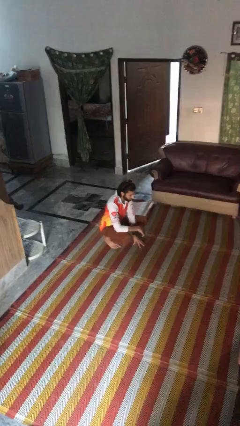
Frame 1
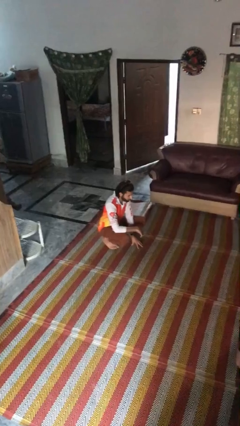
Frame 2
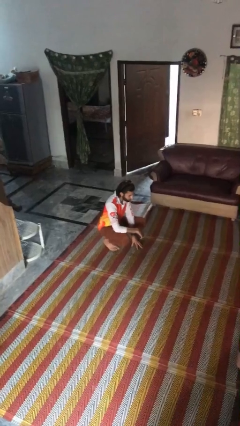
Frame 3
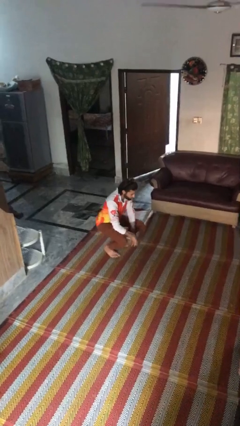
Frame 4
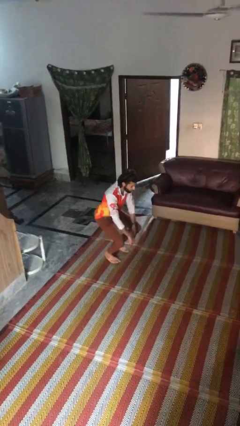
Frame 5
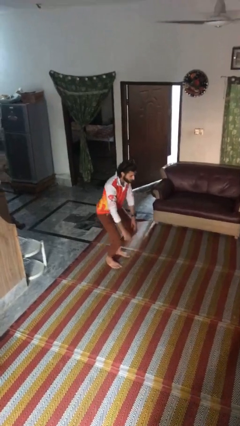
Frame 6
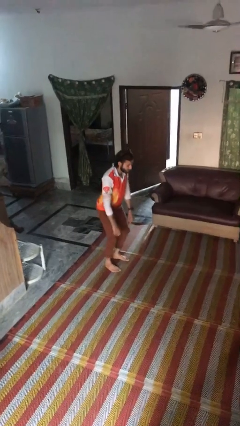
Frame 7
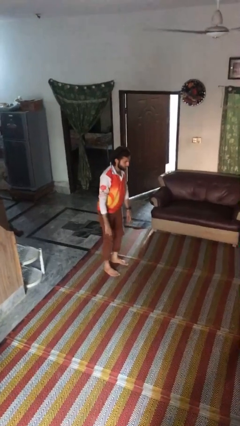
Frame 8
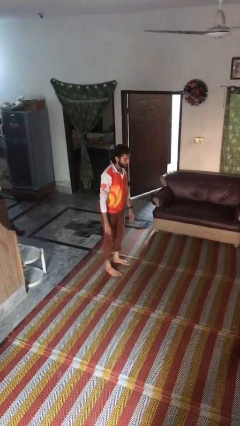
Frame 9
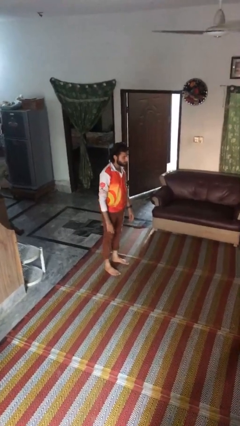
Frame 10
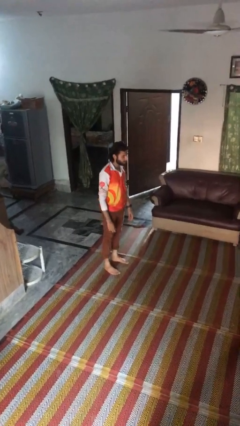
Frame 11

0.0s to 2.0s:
person stands up

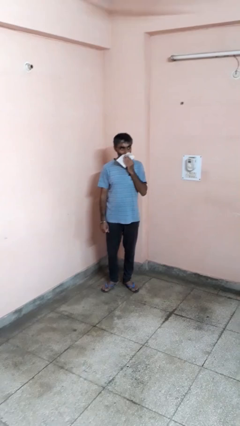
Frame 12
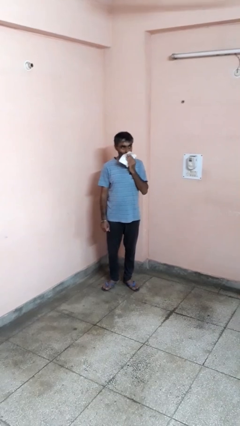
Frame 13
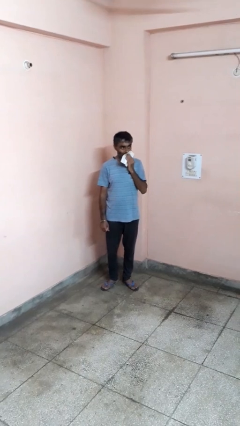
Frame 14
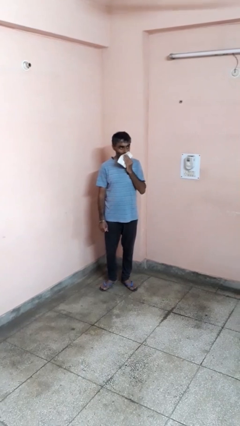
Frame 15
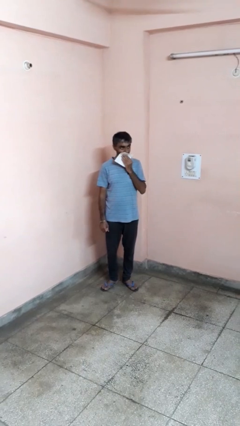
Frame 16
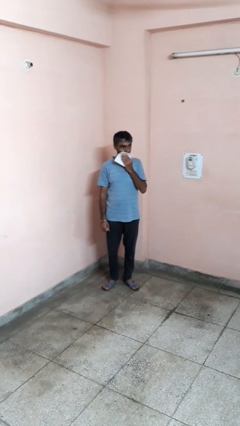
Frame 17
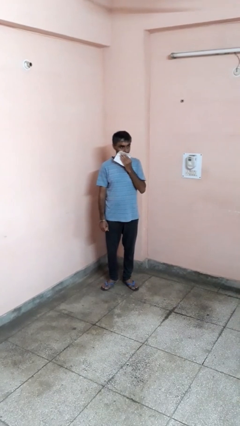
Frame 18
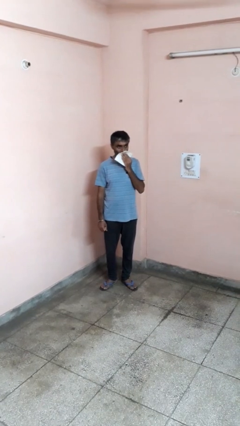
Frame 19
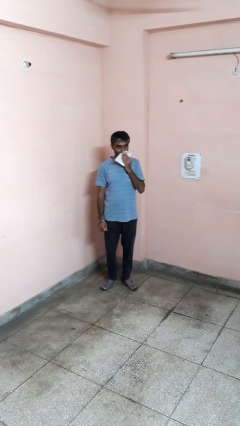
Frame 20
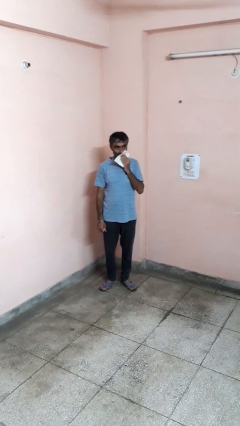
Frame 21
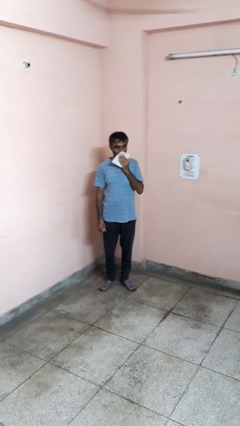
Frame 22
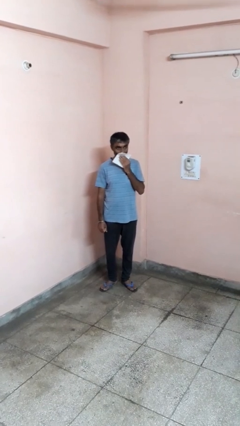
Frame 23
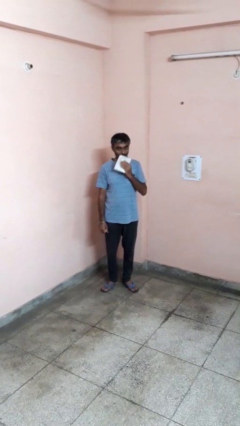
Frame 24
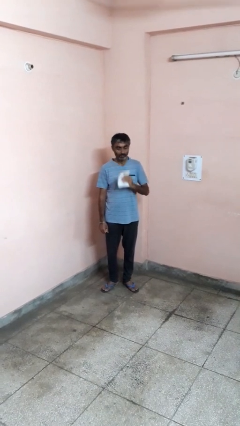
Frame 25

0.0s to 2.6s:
person wipes mouth with napkin

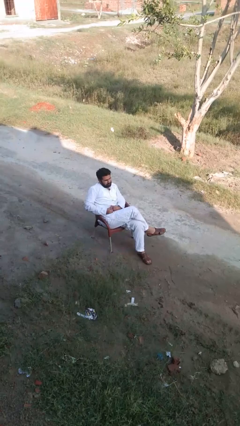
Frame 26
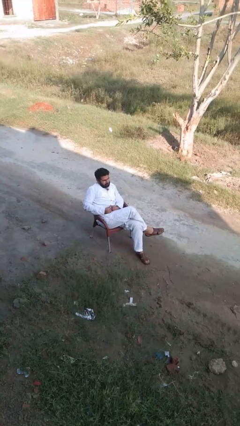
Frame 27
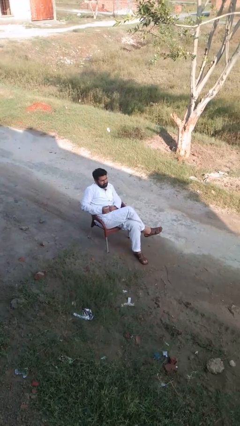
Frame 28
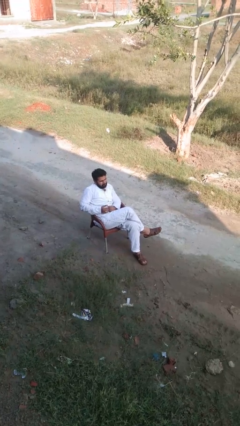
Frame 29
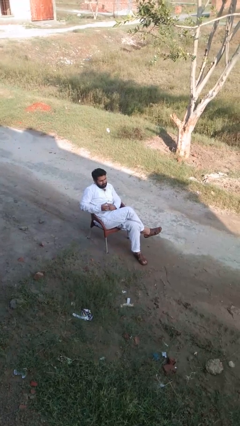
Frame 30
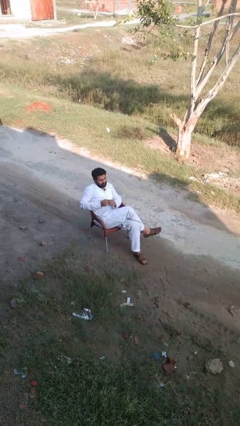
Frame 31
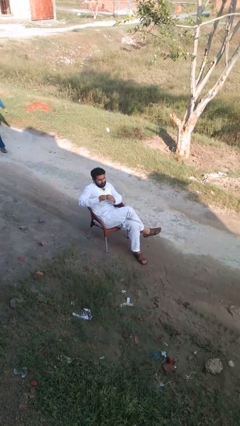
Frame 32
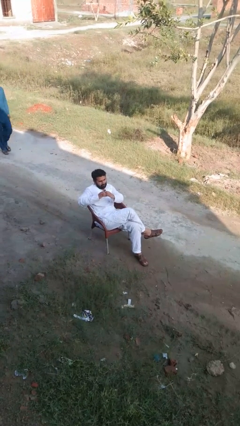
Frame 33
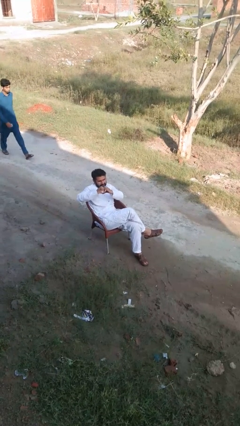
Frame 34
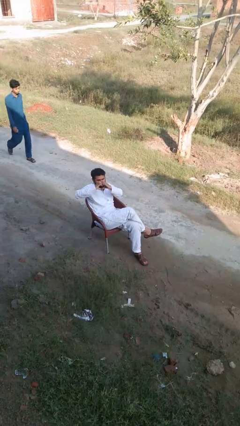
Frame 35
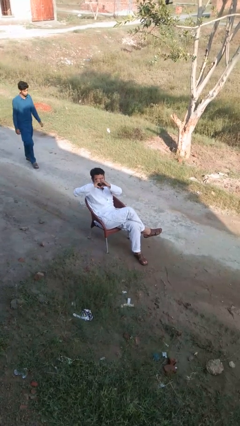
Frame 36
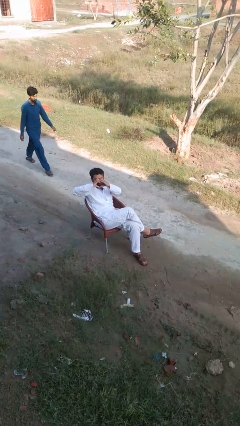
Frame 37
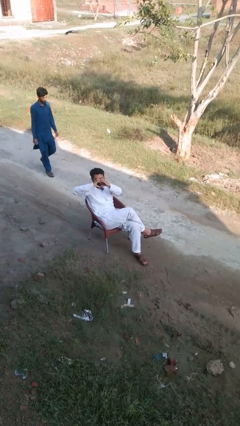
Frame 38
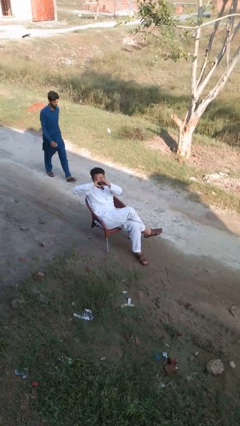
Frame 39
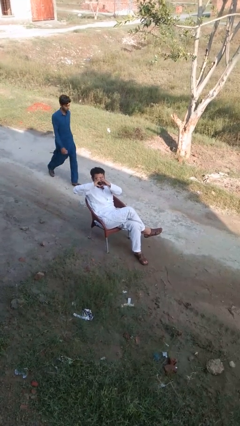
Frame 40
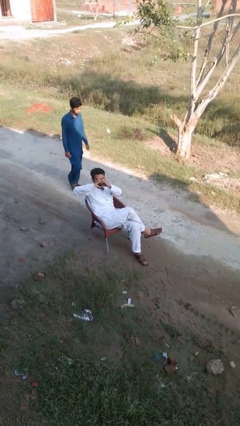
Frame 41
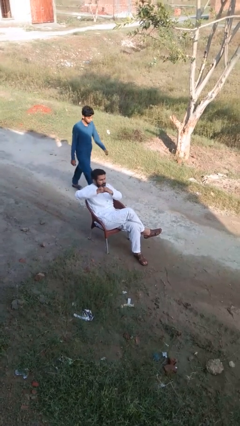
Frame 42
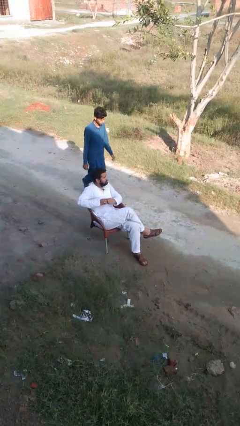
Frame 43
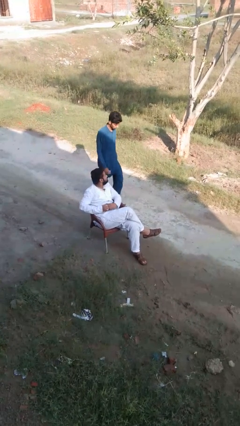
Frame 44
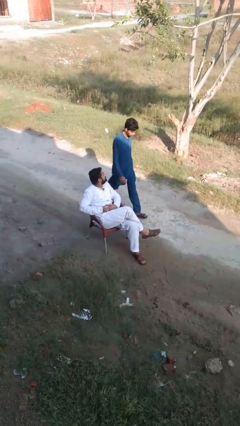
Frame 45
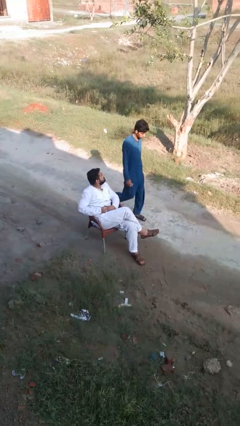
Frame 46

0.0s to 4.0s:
person gestures heart

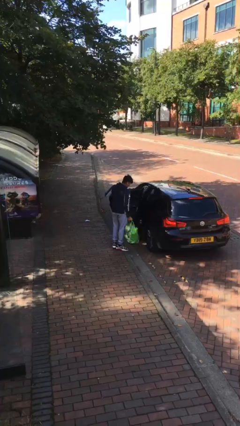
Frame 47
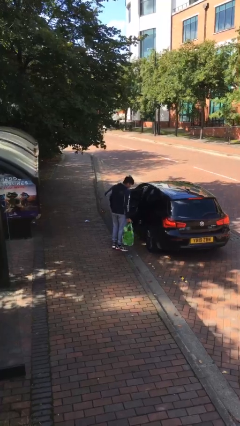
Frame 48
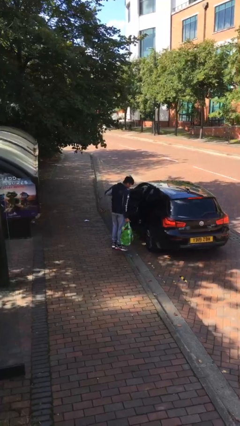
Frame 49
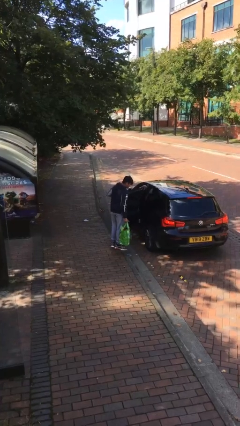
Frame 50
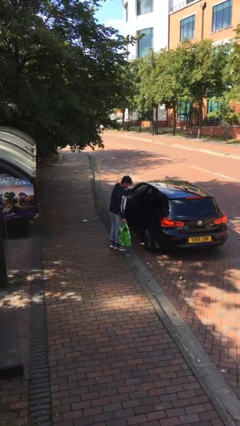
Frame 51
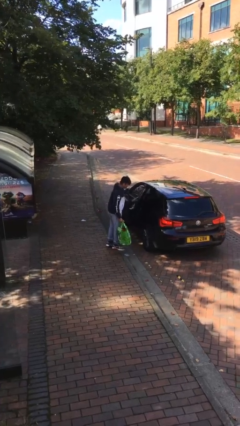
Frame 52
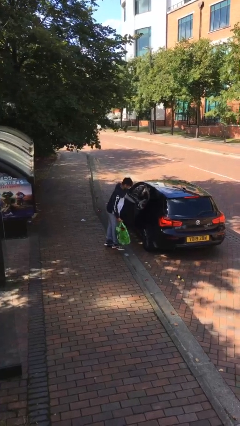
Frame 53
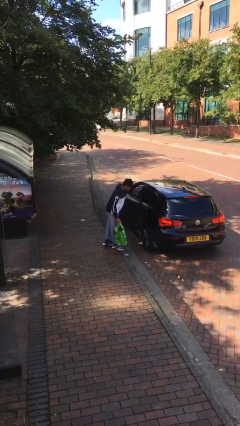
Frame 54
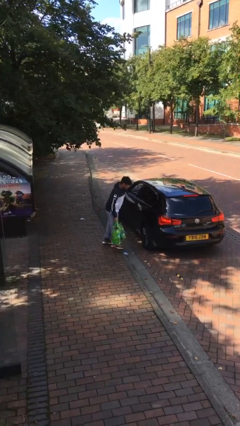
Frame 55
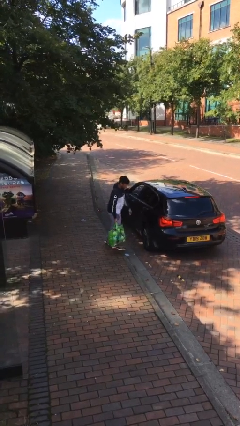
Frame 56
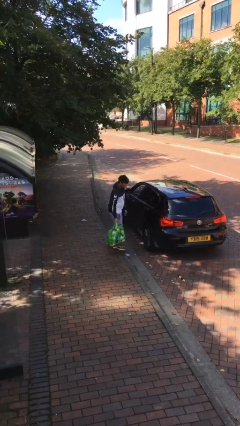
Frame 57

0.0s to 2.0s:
person closes car door

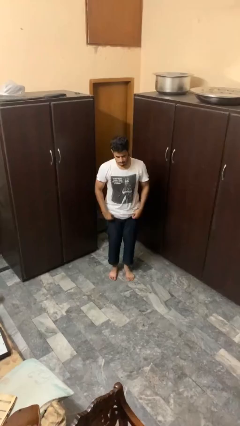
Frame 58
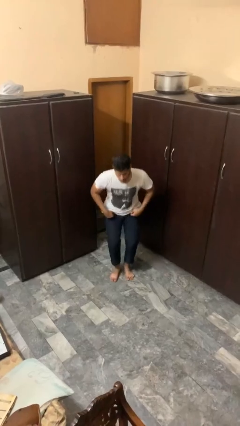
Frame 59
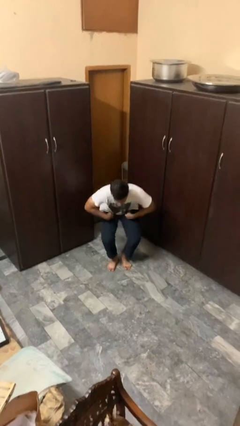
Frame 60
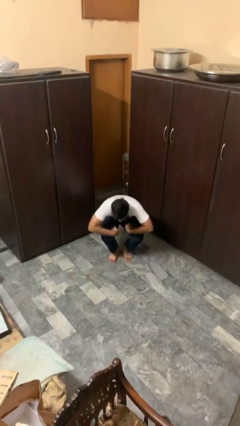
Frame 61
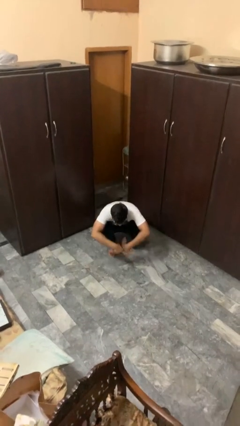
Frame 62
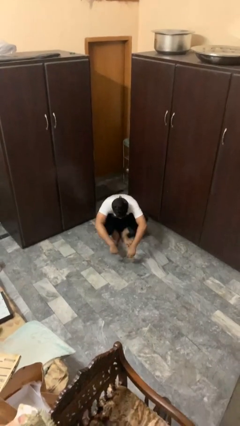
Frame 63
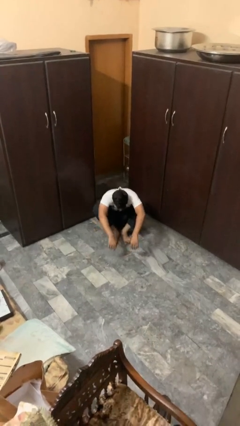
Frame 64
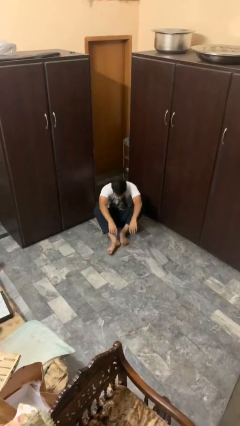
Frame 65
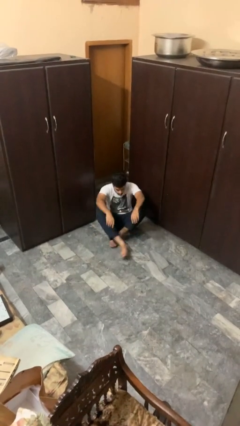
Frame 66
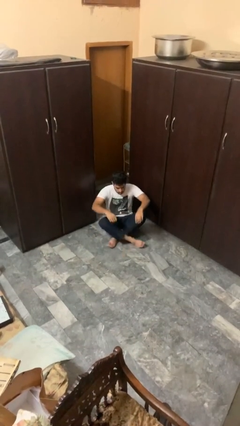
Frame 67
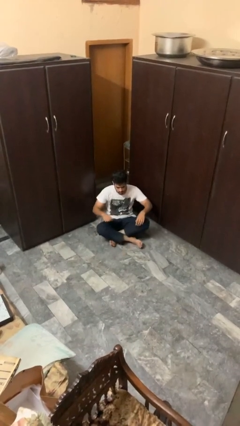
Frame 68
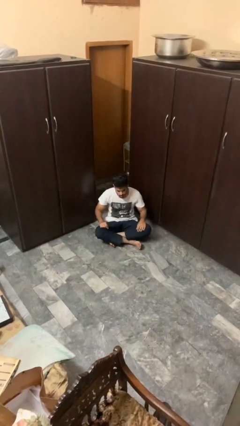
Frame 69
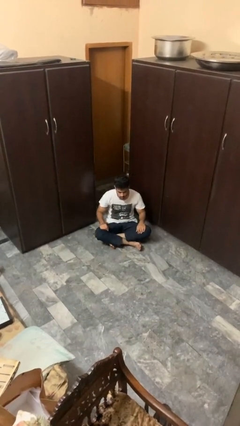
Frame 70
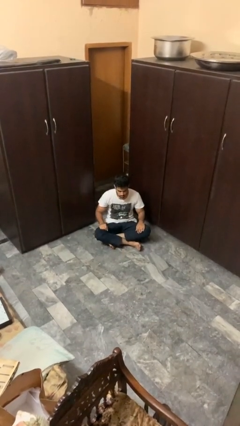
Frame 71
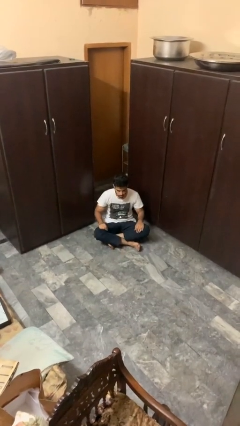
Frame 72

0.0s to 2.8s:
person sits crisscross

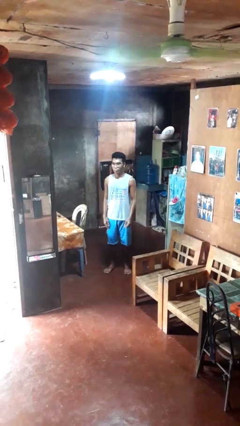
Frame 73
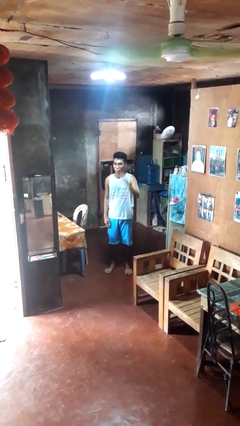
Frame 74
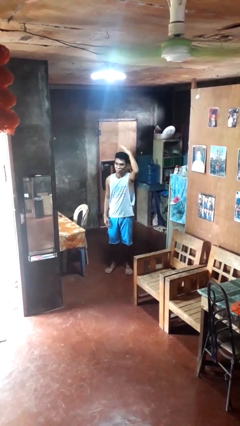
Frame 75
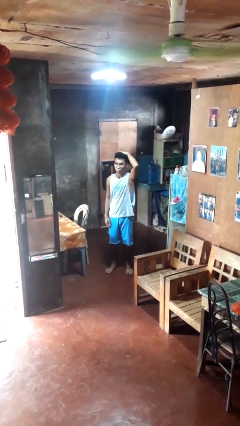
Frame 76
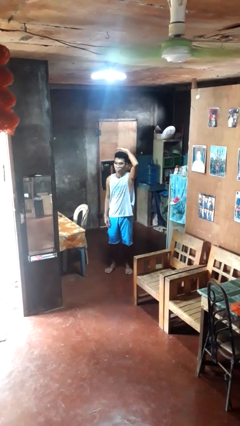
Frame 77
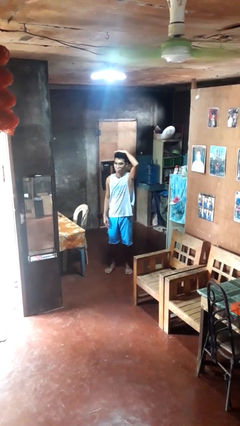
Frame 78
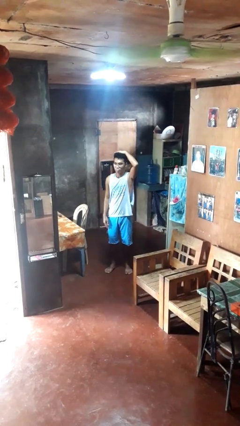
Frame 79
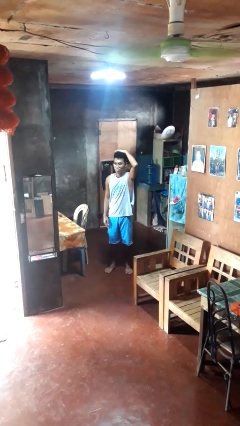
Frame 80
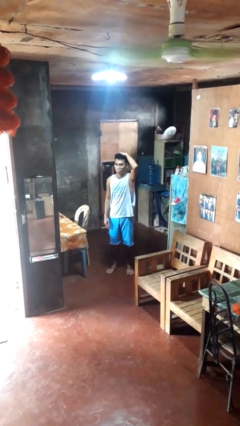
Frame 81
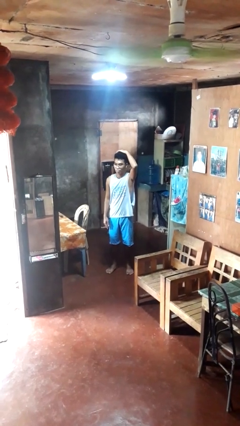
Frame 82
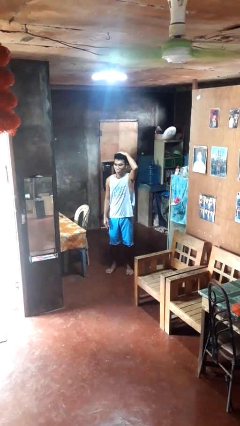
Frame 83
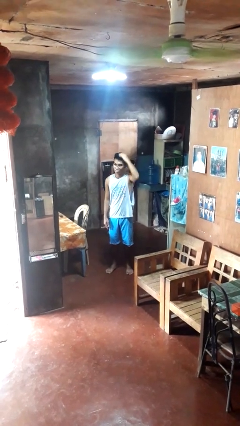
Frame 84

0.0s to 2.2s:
person pats head

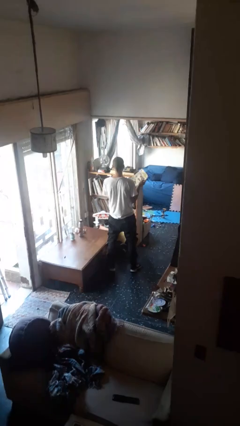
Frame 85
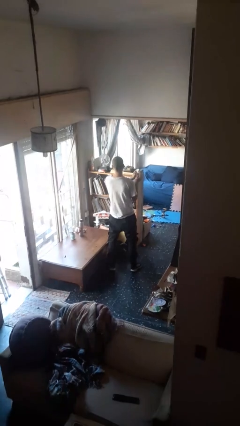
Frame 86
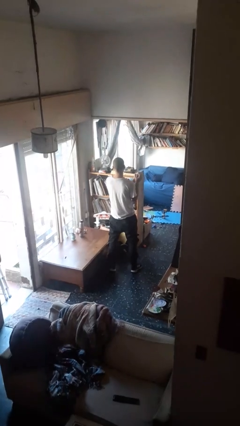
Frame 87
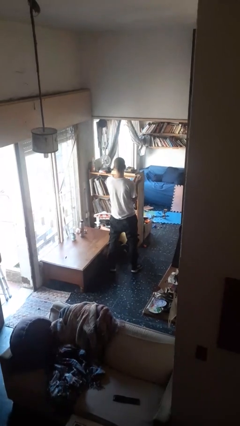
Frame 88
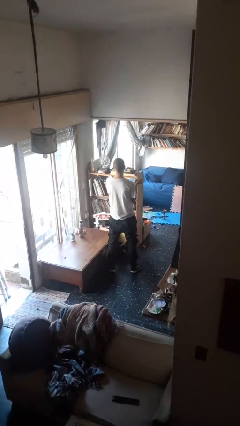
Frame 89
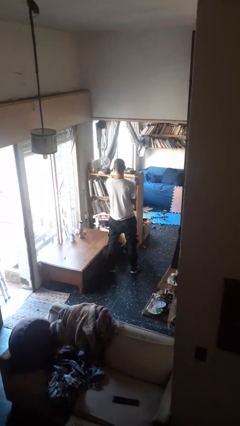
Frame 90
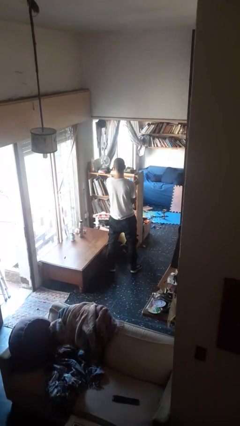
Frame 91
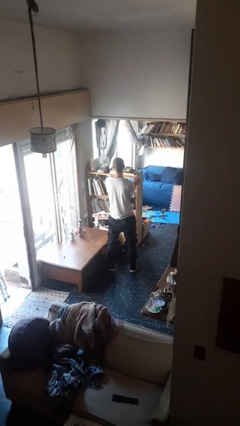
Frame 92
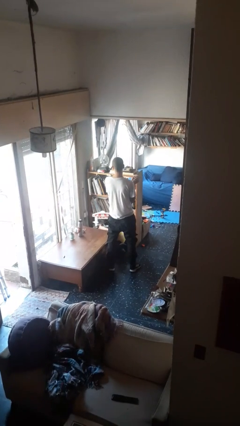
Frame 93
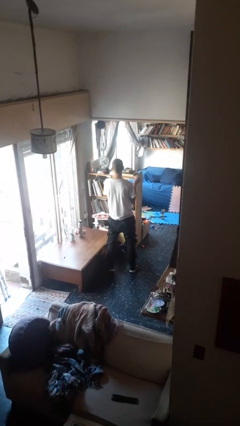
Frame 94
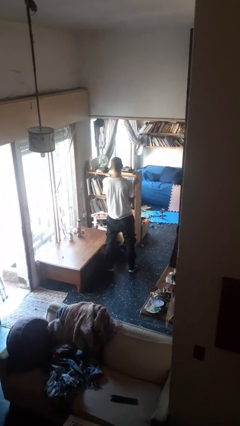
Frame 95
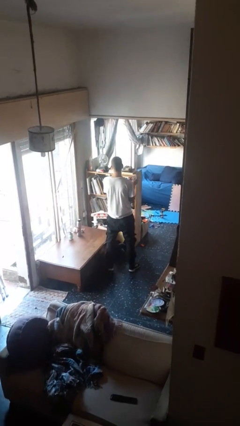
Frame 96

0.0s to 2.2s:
person crumples paper
